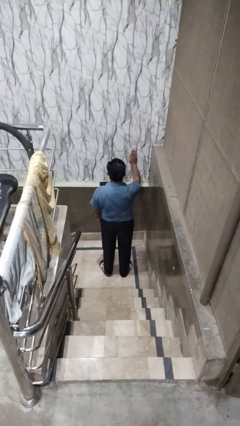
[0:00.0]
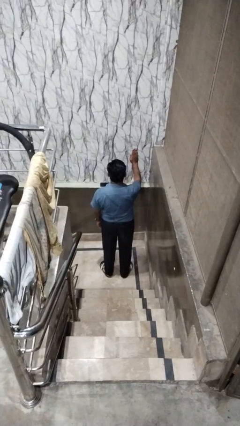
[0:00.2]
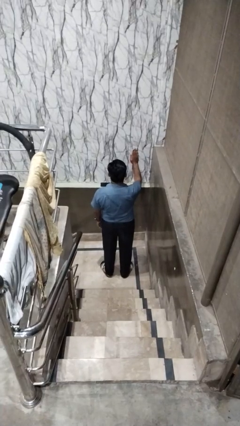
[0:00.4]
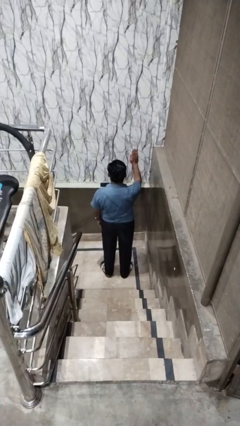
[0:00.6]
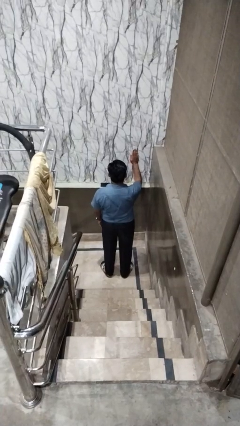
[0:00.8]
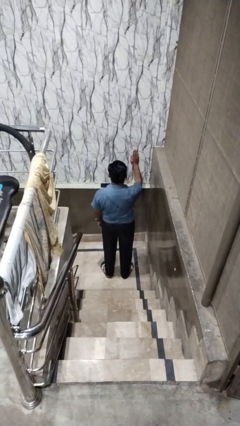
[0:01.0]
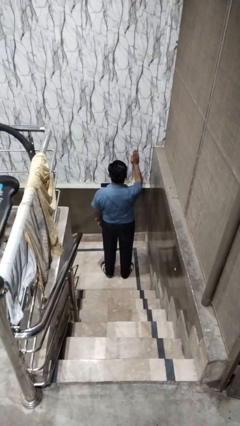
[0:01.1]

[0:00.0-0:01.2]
person gestures stop

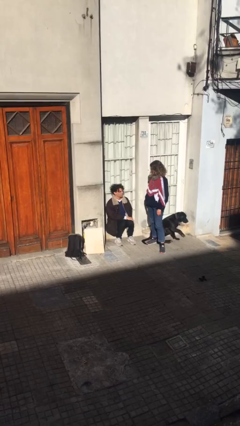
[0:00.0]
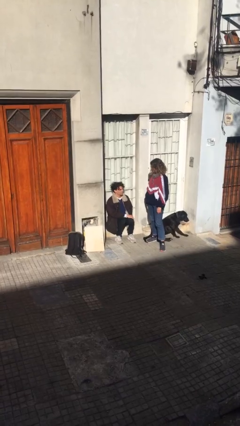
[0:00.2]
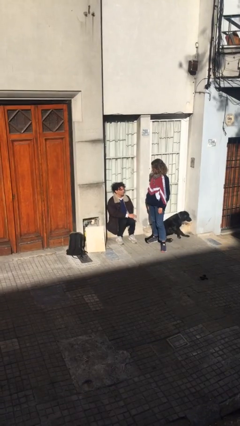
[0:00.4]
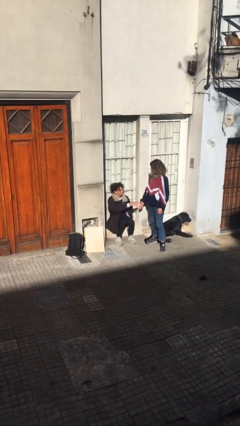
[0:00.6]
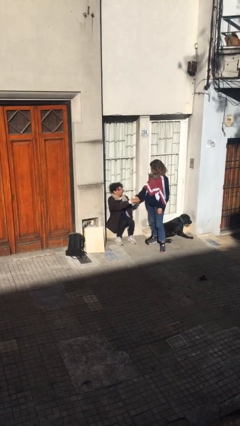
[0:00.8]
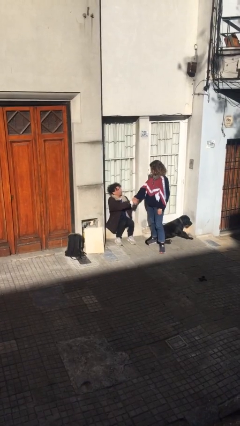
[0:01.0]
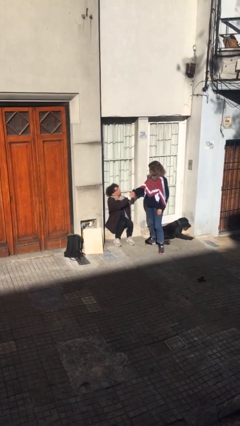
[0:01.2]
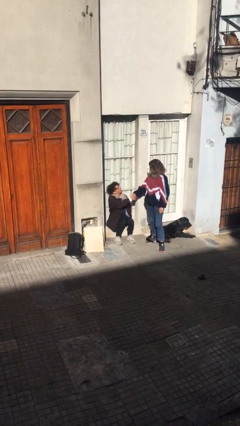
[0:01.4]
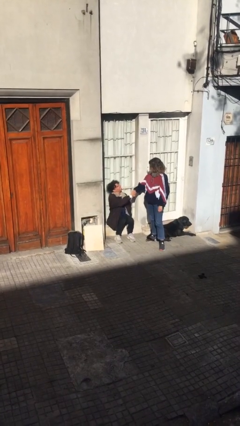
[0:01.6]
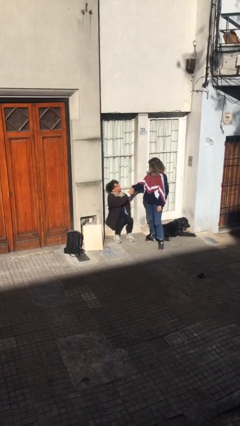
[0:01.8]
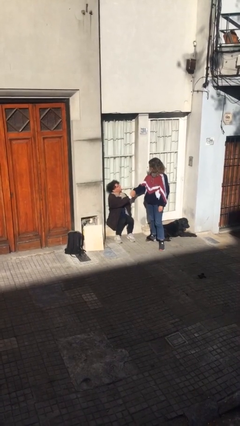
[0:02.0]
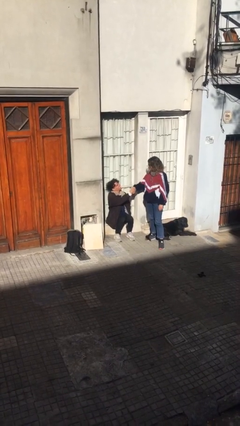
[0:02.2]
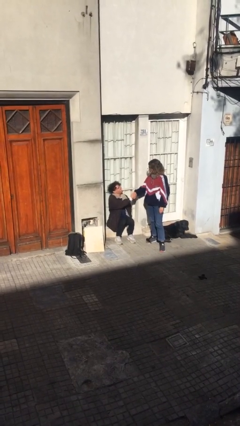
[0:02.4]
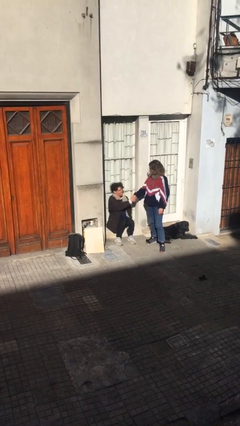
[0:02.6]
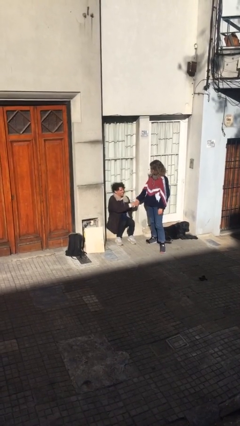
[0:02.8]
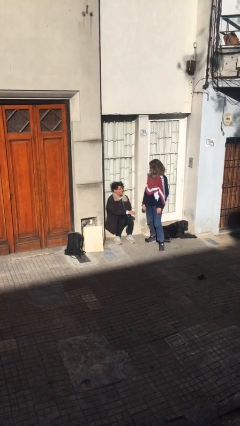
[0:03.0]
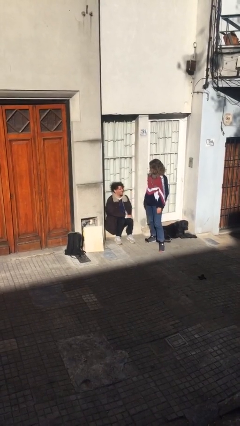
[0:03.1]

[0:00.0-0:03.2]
person shakes hand

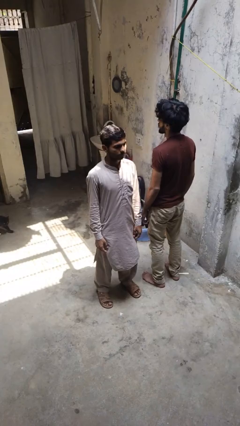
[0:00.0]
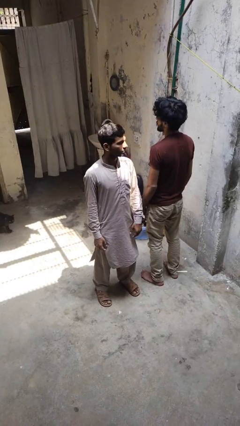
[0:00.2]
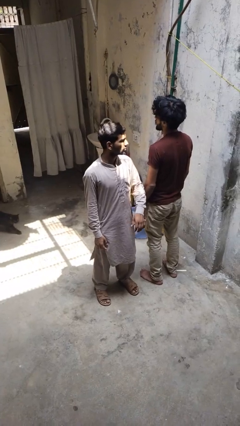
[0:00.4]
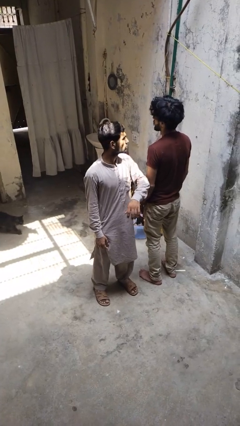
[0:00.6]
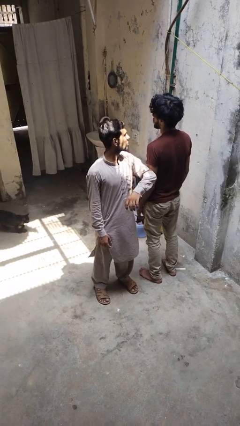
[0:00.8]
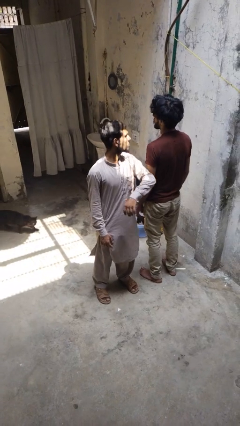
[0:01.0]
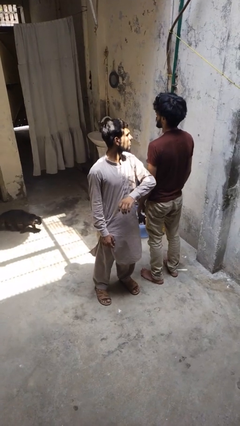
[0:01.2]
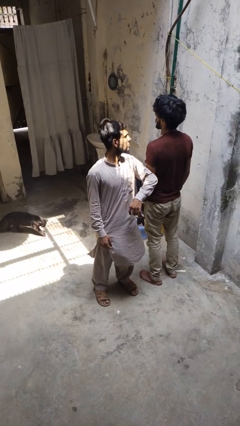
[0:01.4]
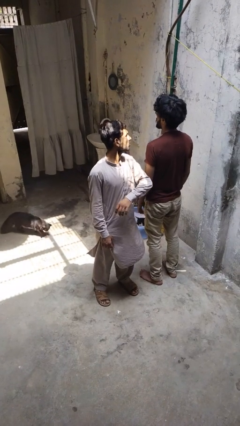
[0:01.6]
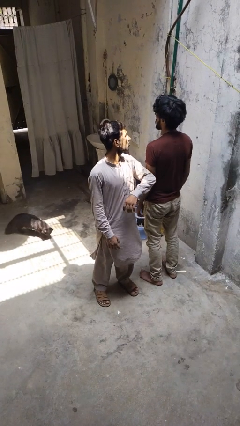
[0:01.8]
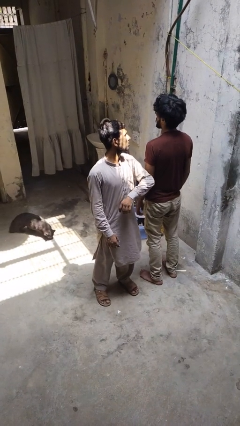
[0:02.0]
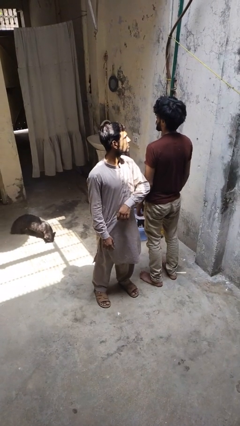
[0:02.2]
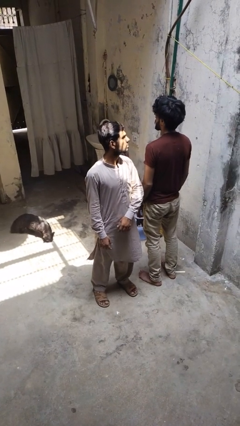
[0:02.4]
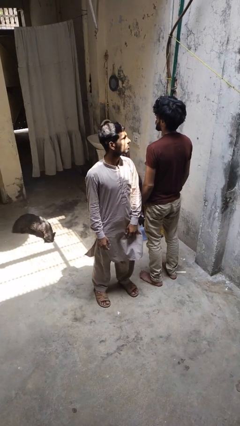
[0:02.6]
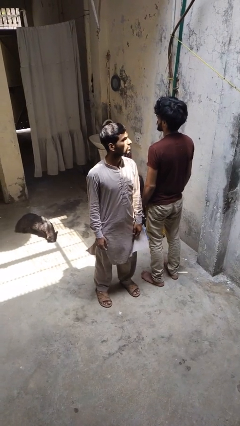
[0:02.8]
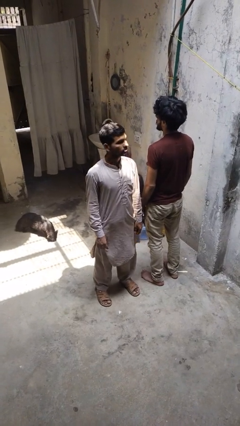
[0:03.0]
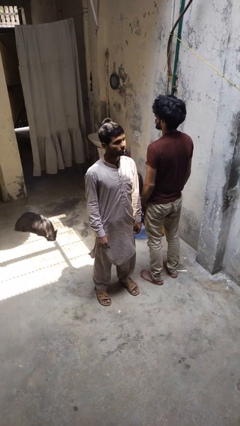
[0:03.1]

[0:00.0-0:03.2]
person nudges person with elbow

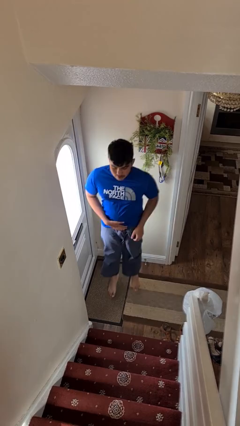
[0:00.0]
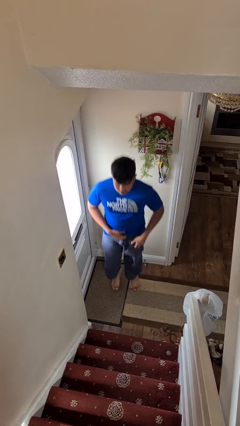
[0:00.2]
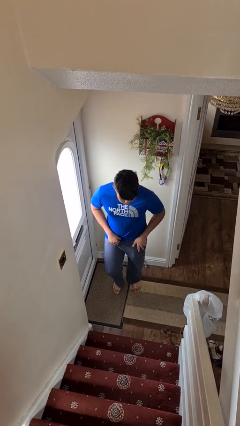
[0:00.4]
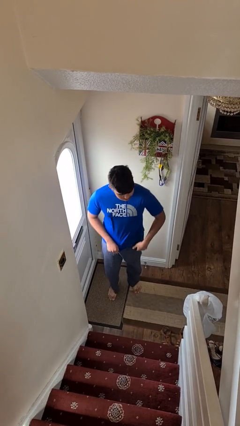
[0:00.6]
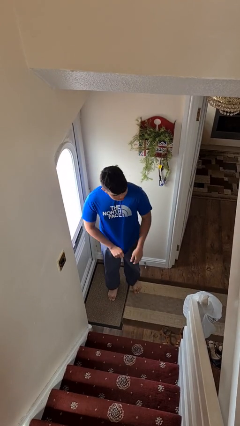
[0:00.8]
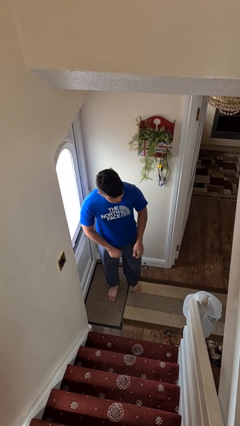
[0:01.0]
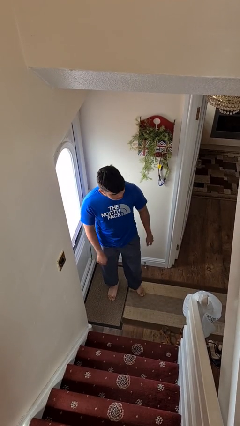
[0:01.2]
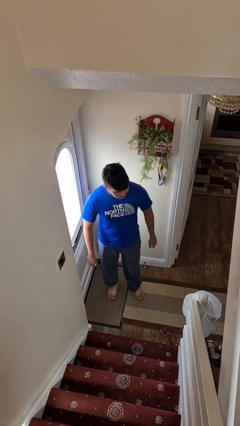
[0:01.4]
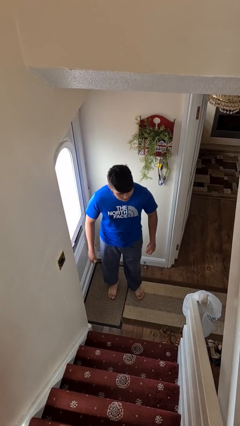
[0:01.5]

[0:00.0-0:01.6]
person jumps

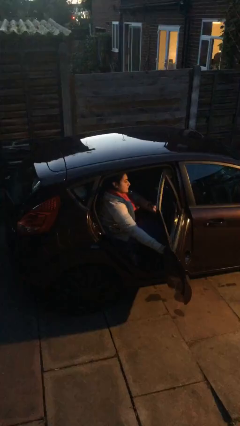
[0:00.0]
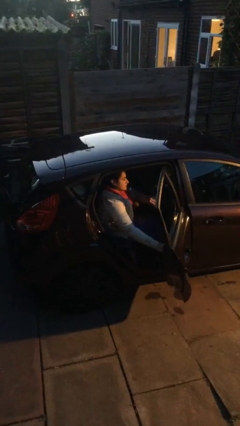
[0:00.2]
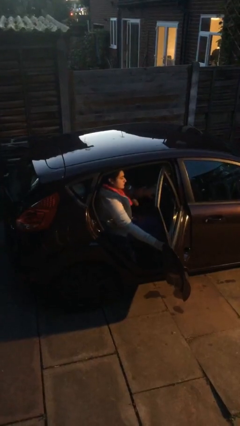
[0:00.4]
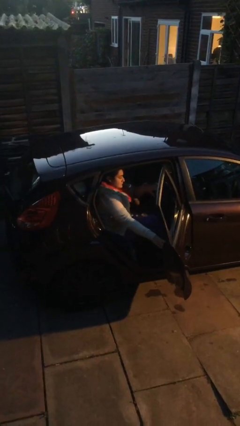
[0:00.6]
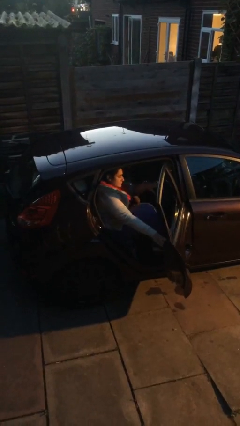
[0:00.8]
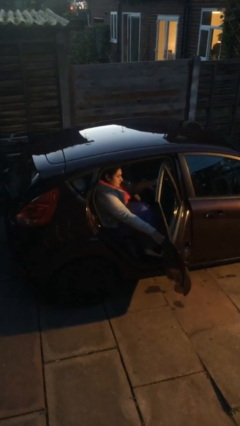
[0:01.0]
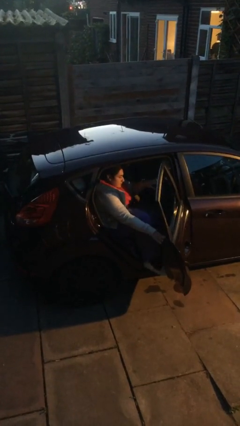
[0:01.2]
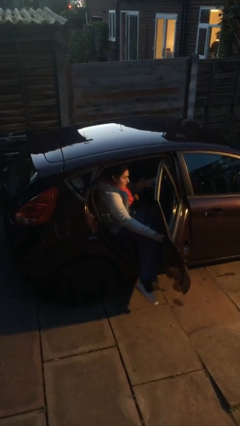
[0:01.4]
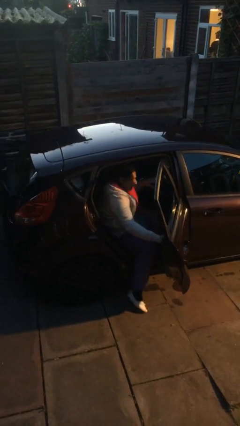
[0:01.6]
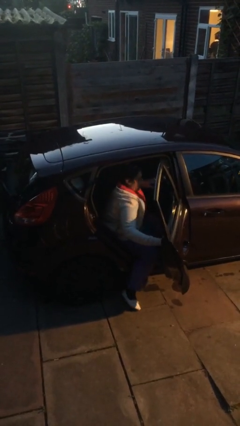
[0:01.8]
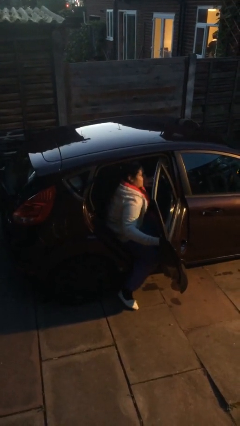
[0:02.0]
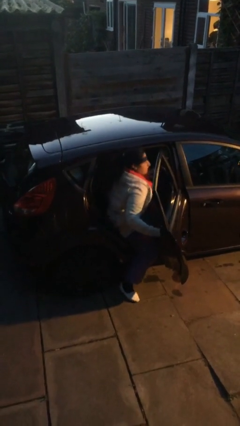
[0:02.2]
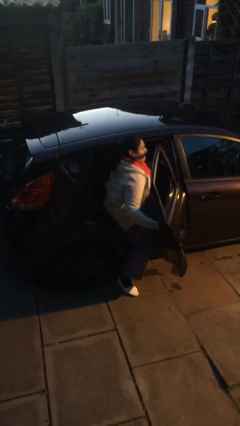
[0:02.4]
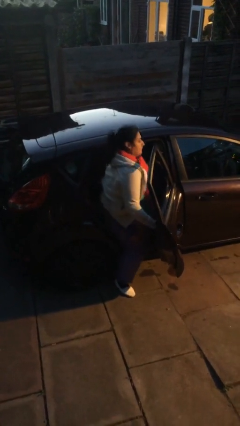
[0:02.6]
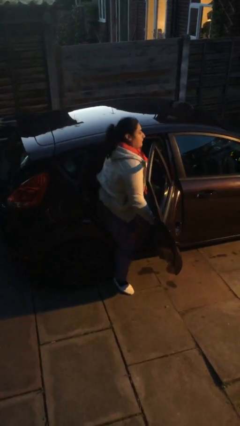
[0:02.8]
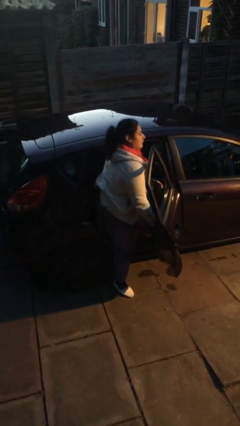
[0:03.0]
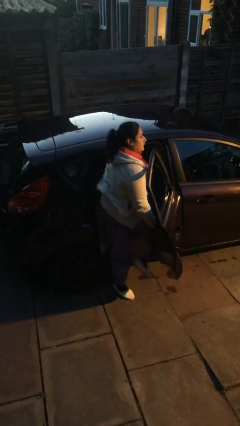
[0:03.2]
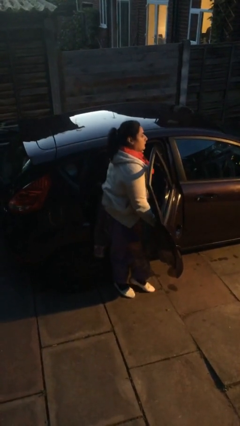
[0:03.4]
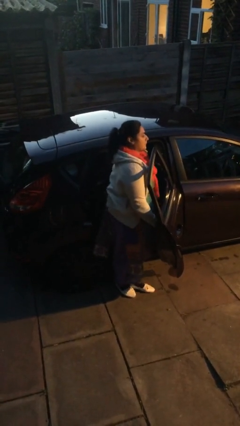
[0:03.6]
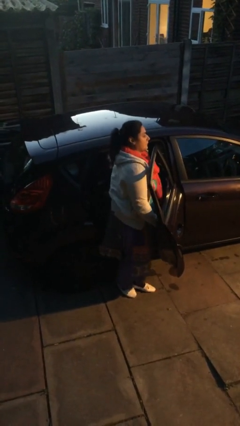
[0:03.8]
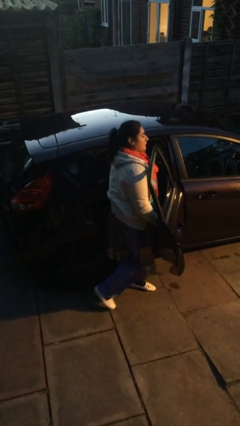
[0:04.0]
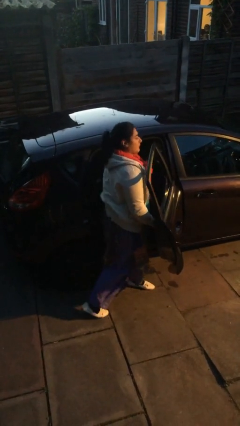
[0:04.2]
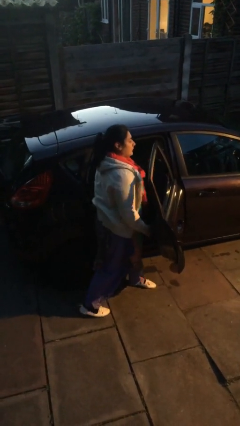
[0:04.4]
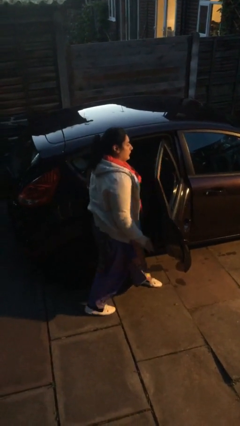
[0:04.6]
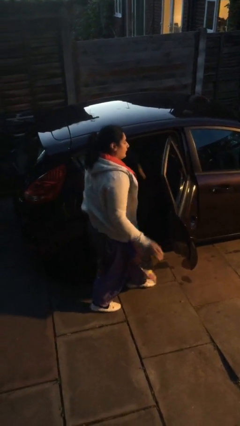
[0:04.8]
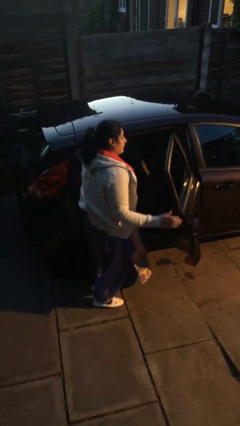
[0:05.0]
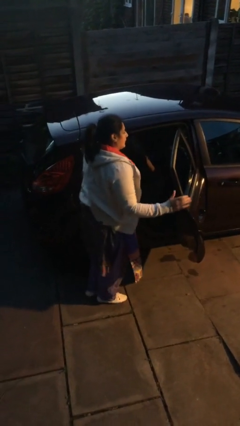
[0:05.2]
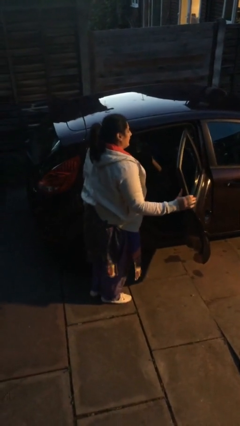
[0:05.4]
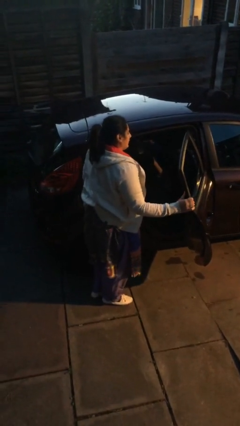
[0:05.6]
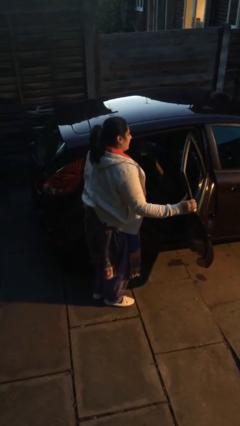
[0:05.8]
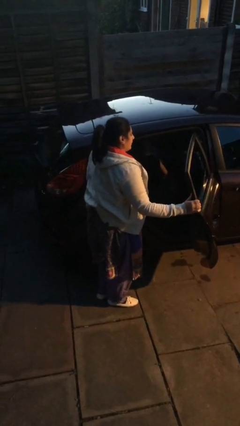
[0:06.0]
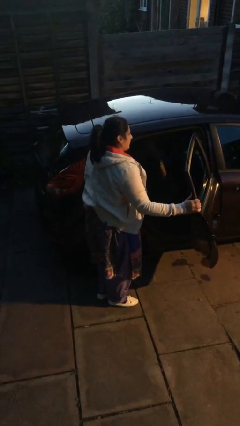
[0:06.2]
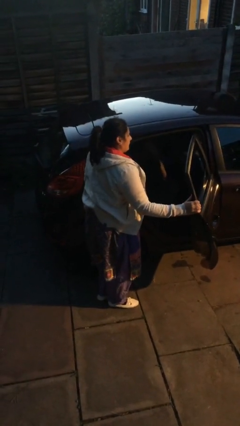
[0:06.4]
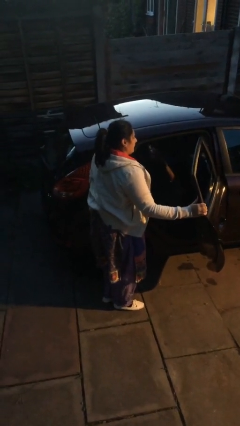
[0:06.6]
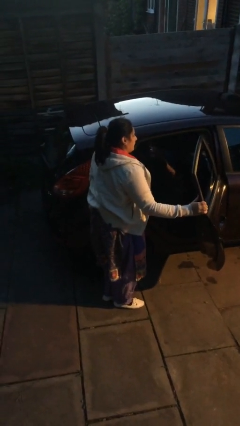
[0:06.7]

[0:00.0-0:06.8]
person exits car

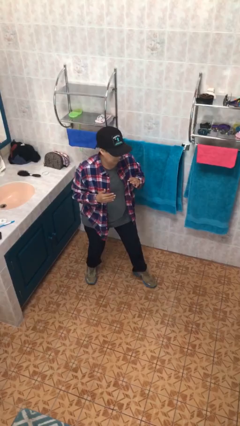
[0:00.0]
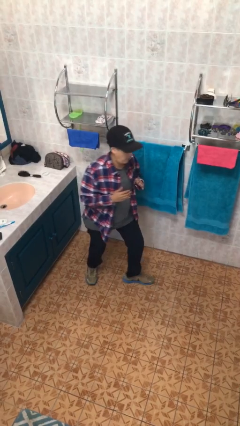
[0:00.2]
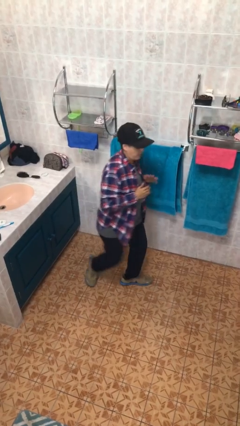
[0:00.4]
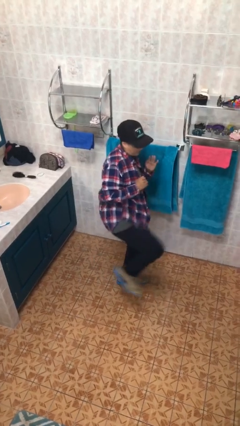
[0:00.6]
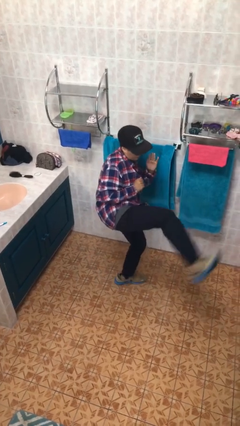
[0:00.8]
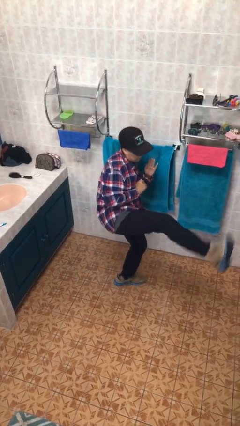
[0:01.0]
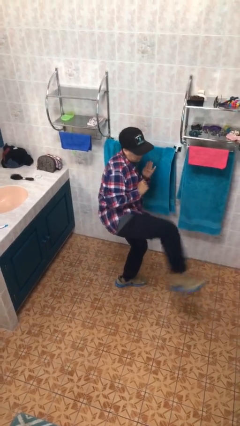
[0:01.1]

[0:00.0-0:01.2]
person karate kicks
